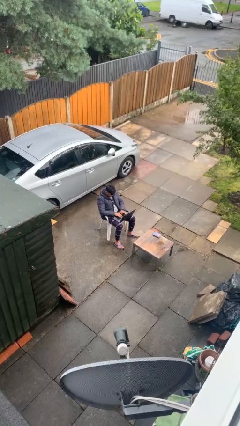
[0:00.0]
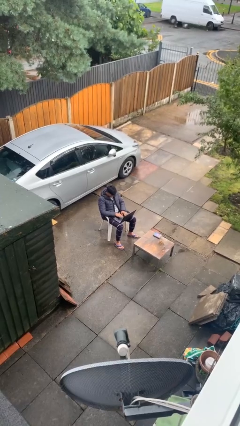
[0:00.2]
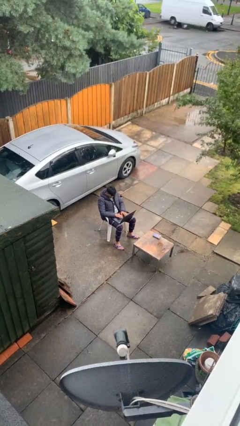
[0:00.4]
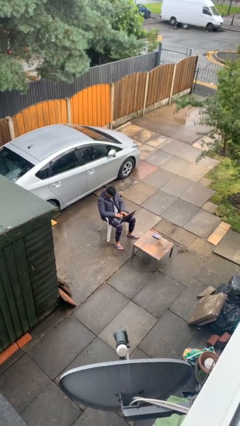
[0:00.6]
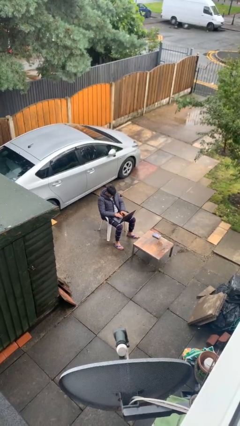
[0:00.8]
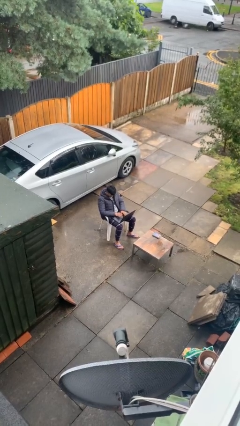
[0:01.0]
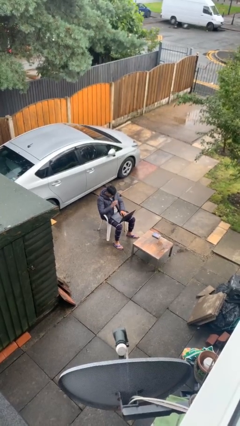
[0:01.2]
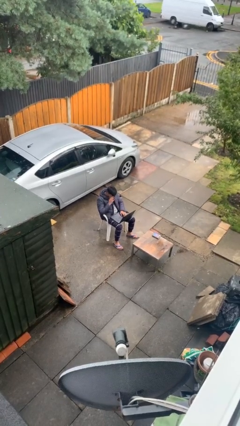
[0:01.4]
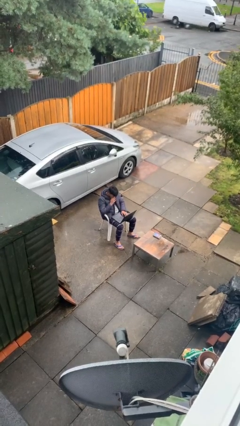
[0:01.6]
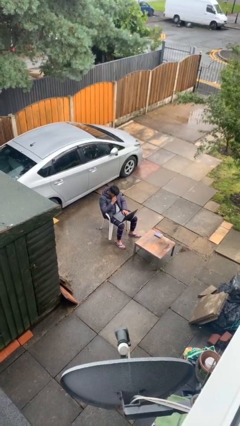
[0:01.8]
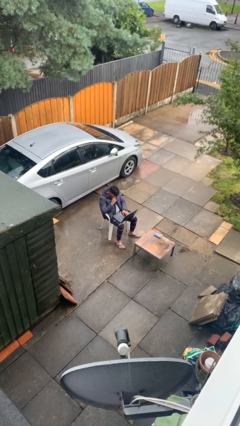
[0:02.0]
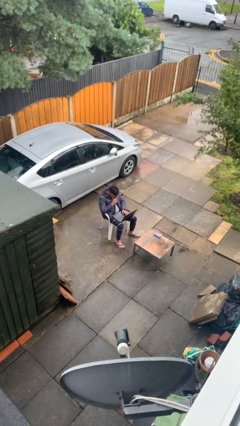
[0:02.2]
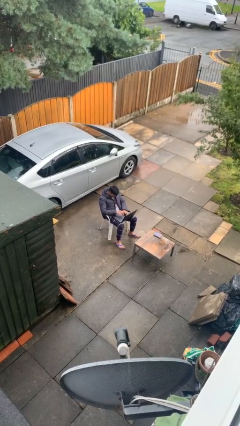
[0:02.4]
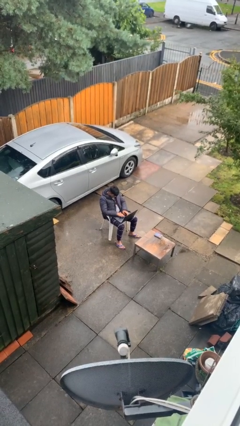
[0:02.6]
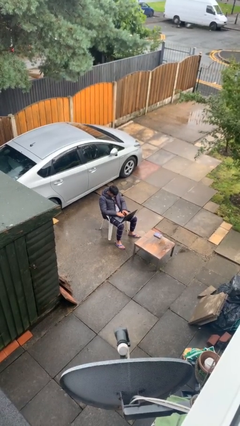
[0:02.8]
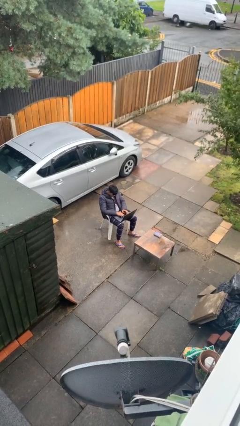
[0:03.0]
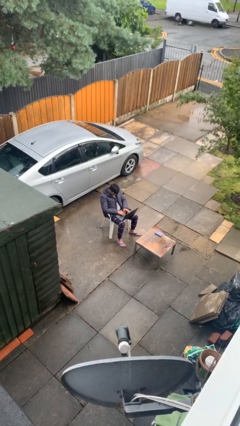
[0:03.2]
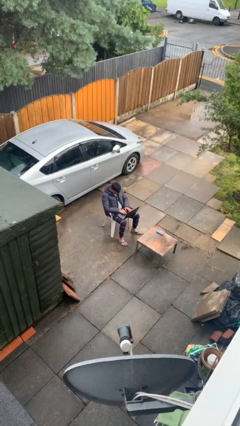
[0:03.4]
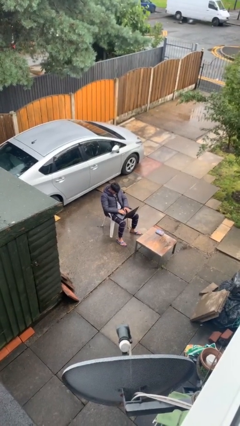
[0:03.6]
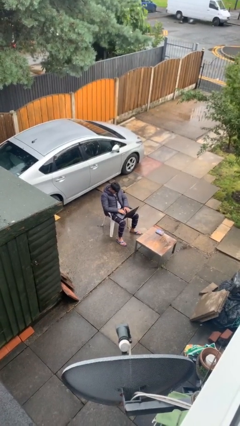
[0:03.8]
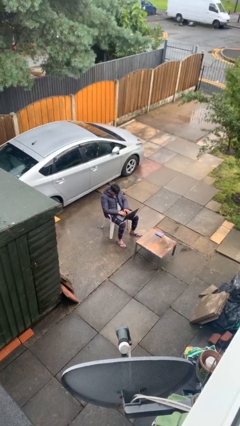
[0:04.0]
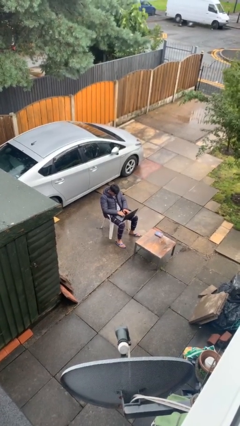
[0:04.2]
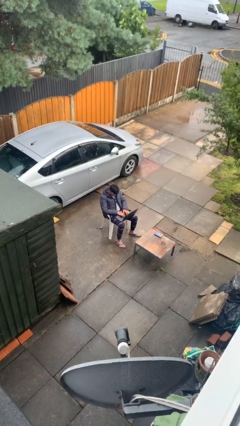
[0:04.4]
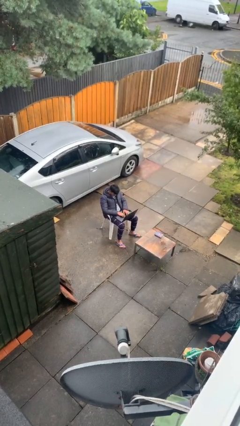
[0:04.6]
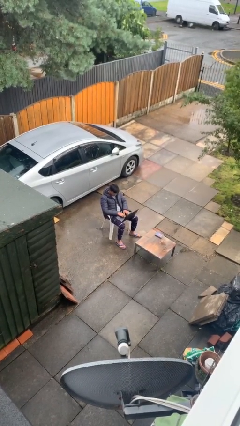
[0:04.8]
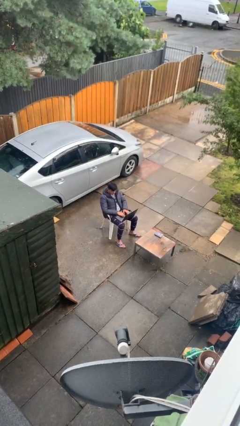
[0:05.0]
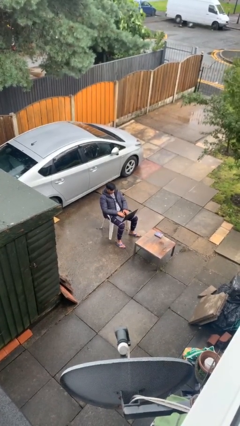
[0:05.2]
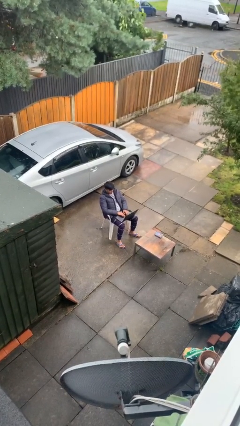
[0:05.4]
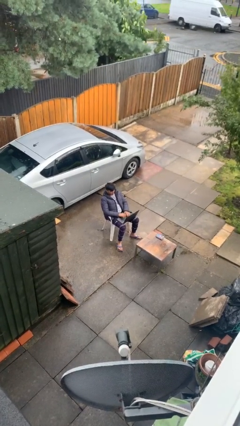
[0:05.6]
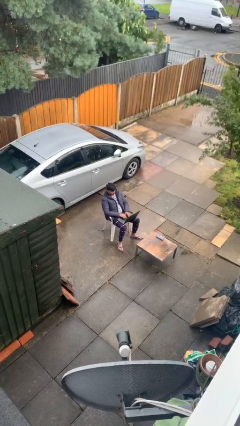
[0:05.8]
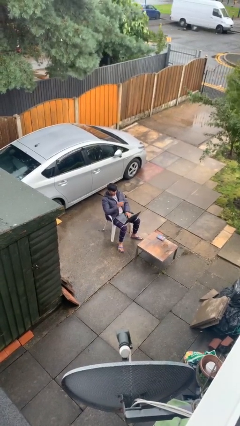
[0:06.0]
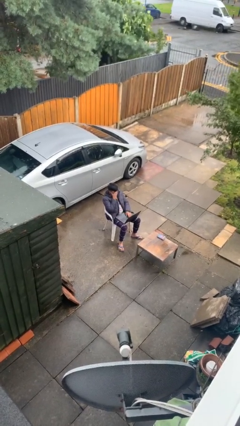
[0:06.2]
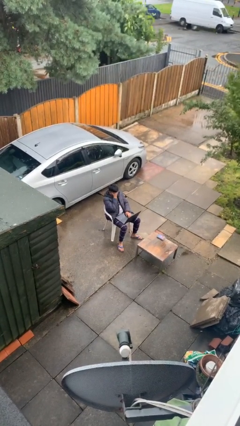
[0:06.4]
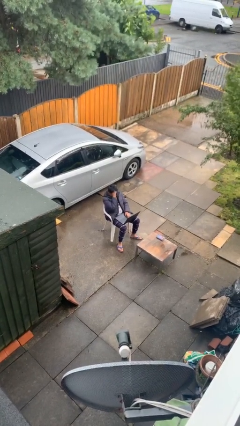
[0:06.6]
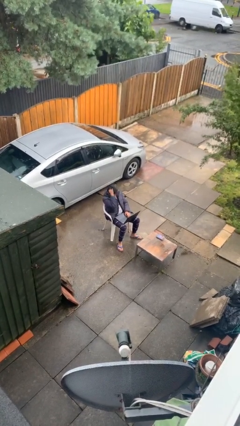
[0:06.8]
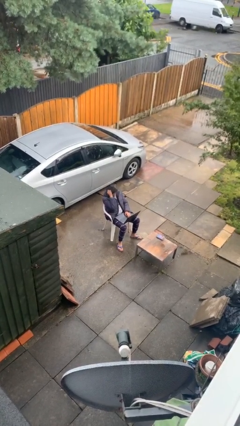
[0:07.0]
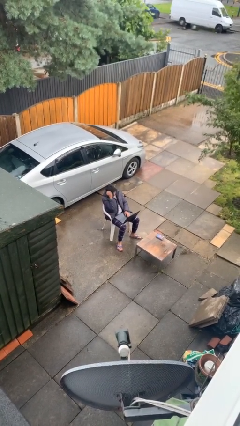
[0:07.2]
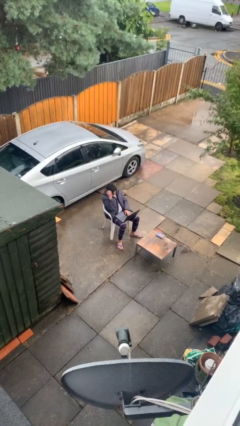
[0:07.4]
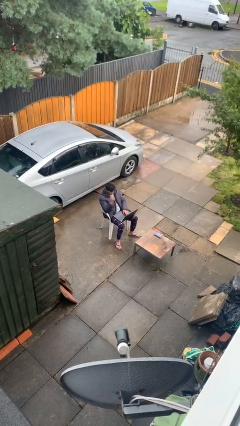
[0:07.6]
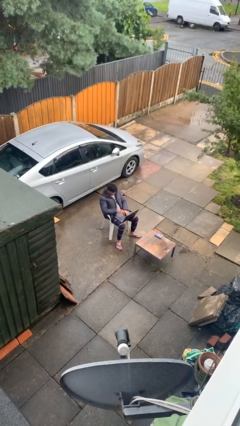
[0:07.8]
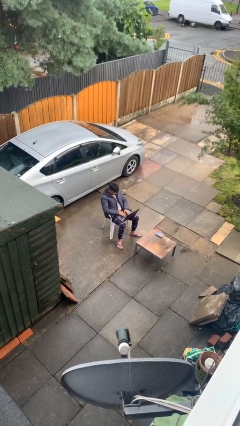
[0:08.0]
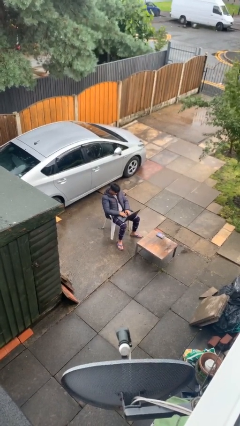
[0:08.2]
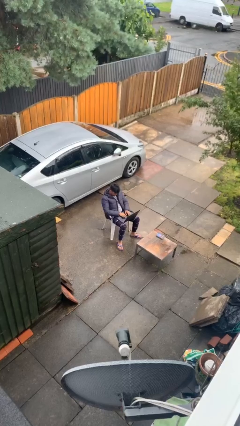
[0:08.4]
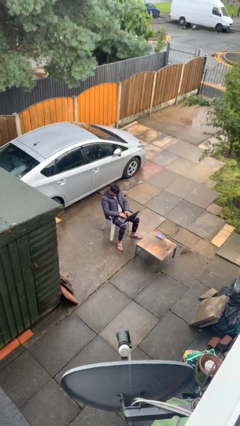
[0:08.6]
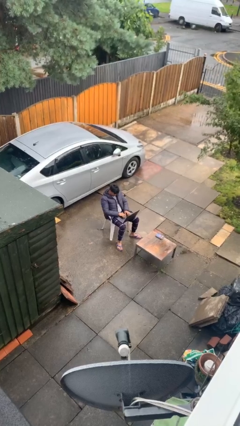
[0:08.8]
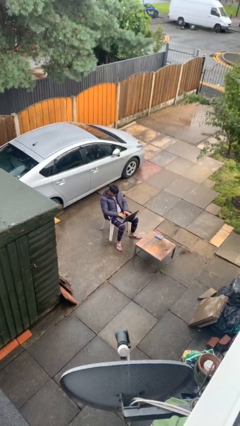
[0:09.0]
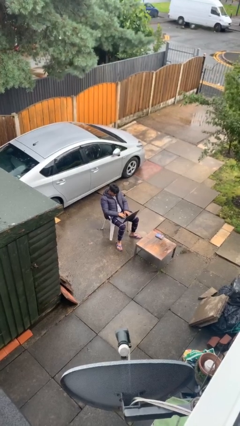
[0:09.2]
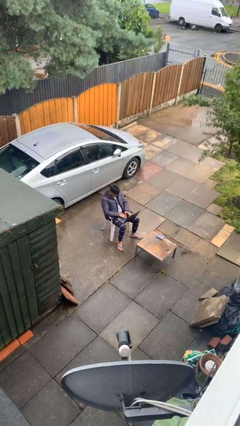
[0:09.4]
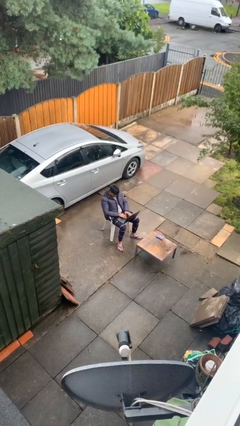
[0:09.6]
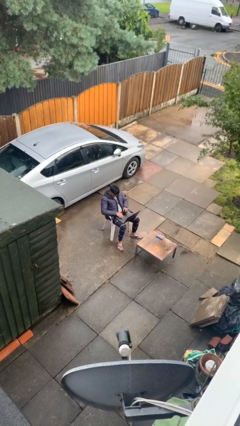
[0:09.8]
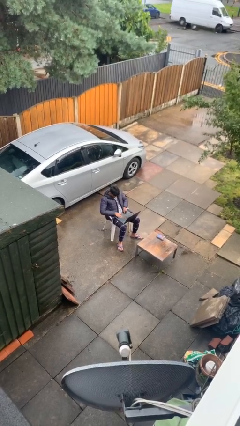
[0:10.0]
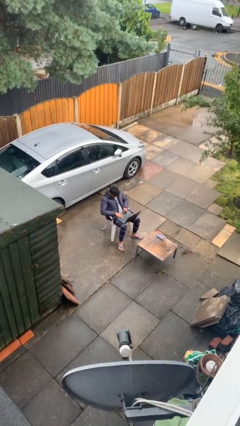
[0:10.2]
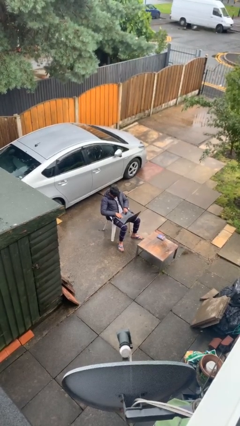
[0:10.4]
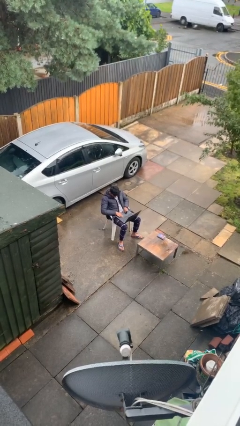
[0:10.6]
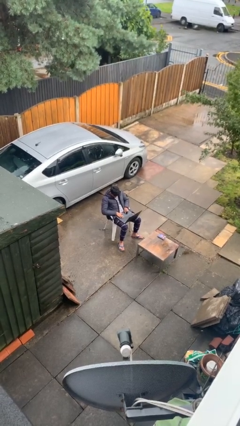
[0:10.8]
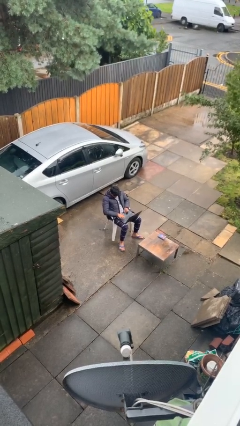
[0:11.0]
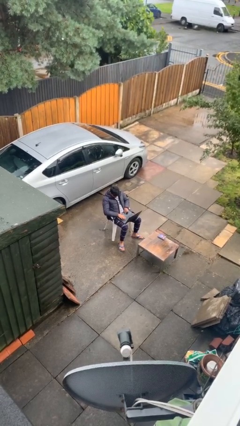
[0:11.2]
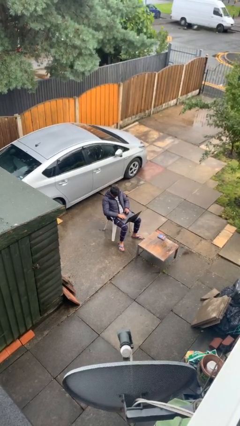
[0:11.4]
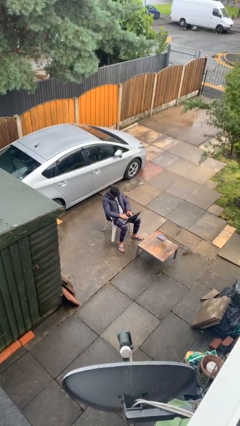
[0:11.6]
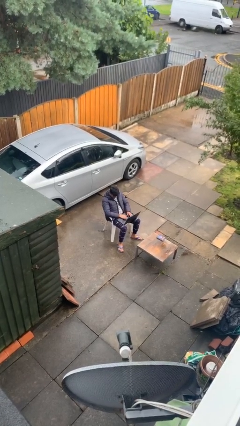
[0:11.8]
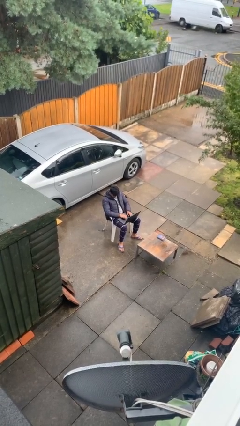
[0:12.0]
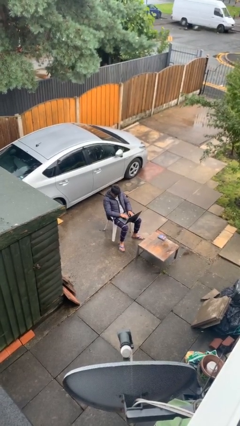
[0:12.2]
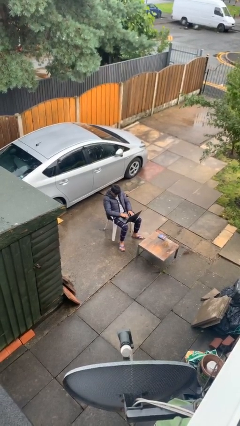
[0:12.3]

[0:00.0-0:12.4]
person interacts with laptop

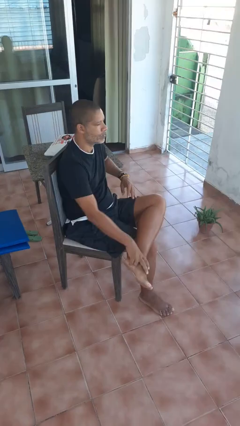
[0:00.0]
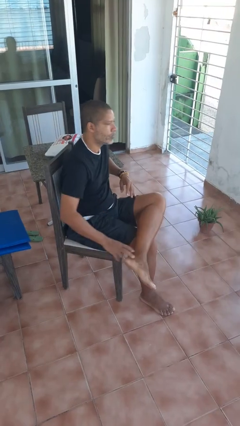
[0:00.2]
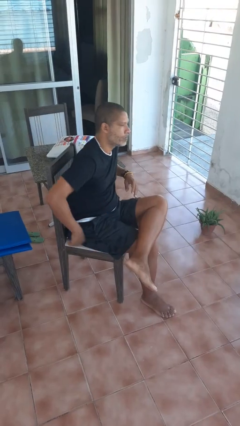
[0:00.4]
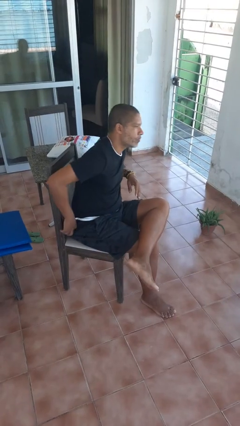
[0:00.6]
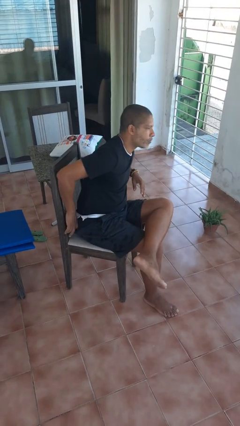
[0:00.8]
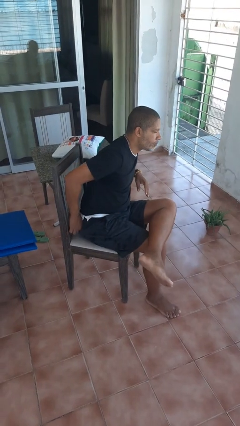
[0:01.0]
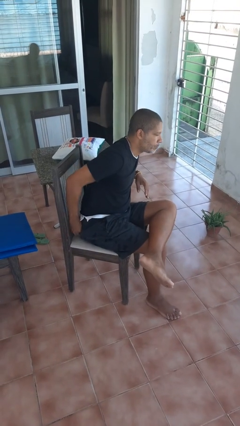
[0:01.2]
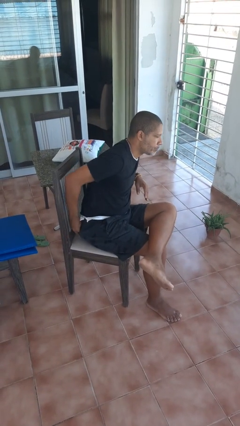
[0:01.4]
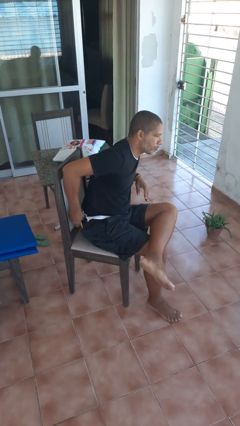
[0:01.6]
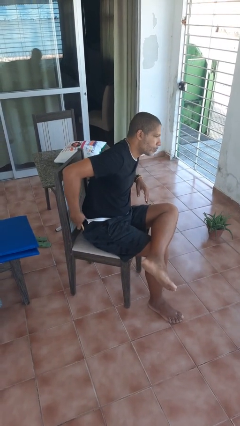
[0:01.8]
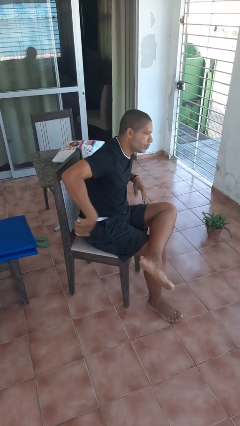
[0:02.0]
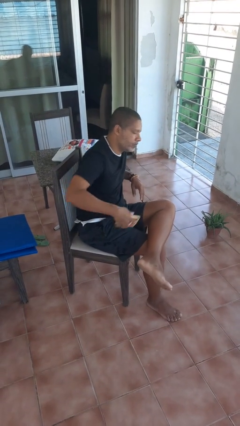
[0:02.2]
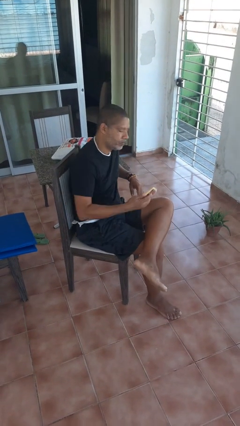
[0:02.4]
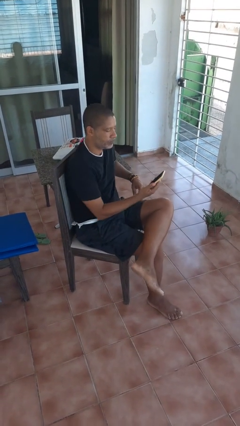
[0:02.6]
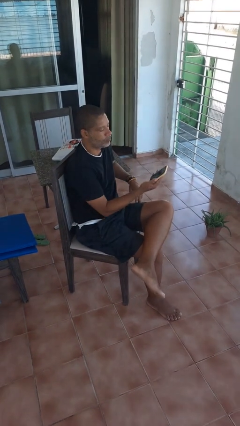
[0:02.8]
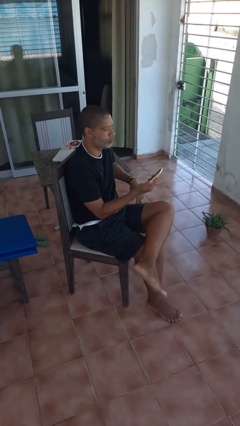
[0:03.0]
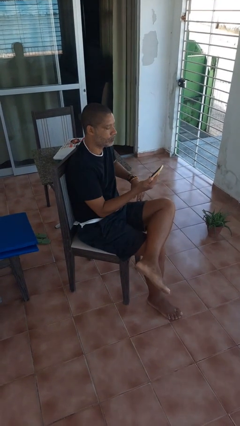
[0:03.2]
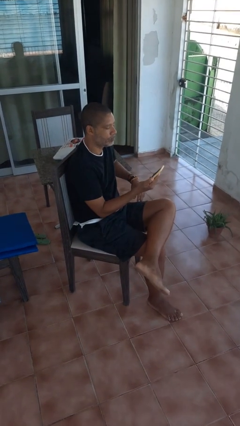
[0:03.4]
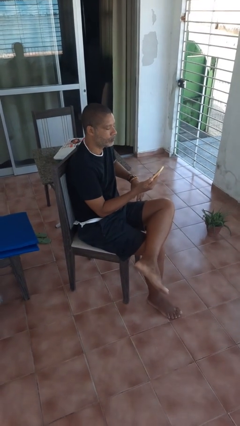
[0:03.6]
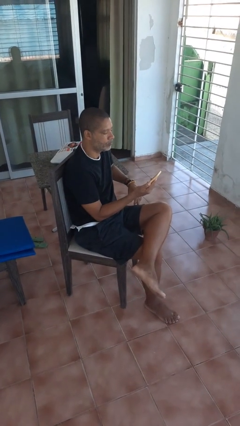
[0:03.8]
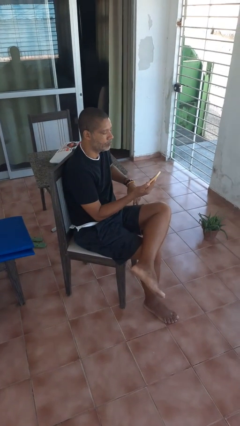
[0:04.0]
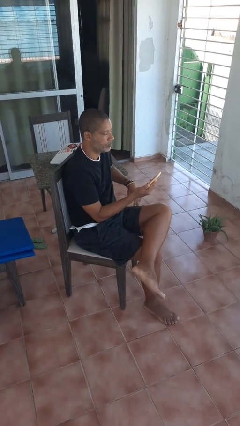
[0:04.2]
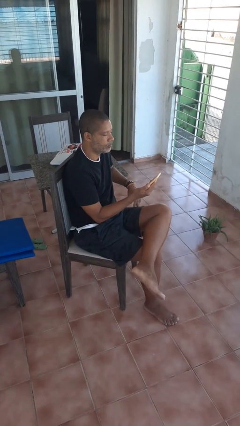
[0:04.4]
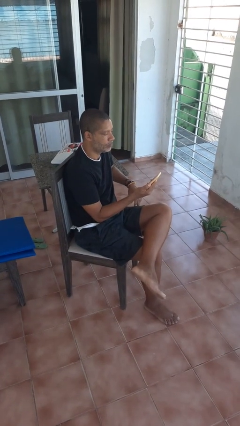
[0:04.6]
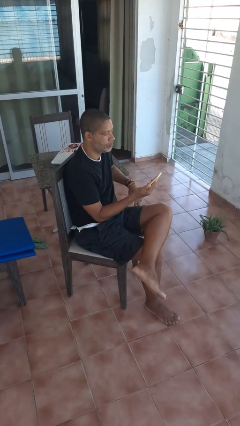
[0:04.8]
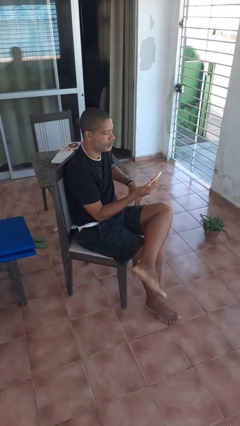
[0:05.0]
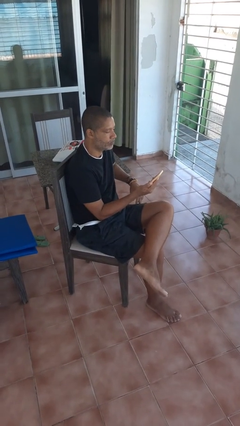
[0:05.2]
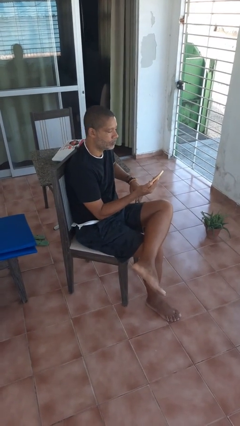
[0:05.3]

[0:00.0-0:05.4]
person takes phone from pocket

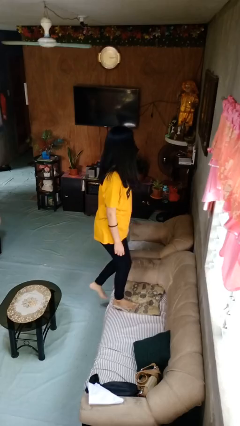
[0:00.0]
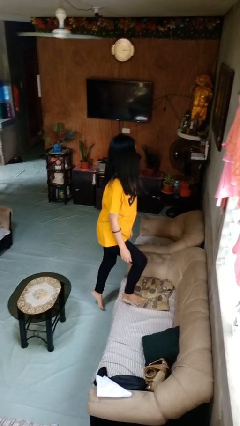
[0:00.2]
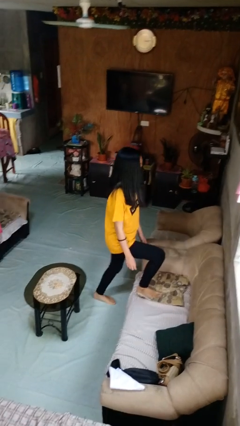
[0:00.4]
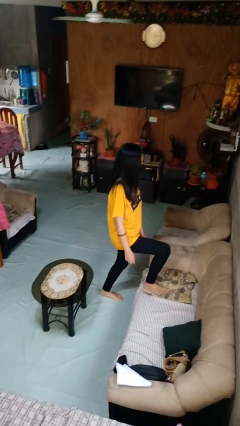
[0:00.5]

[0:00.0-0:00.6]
person climbs off couch
